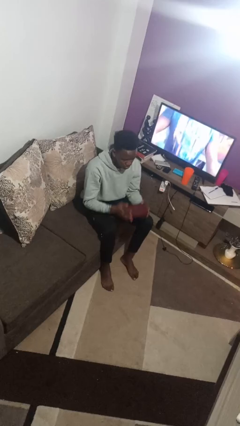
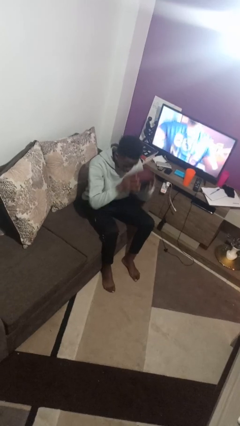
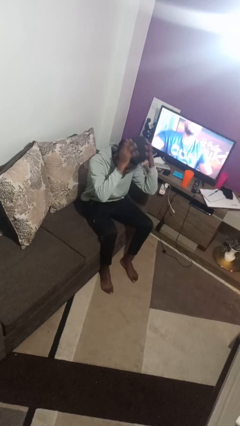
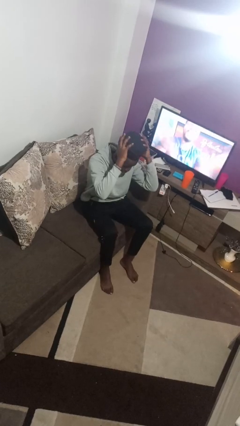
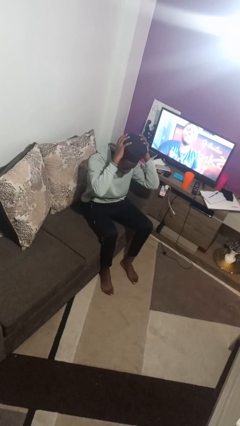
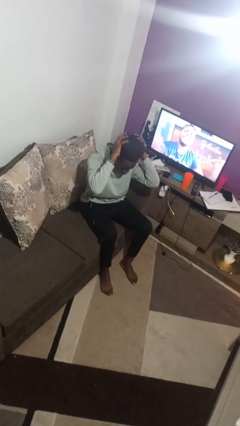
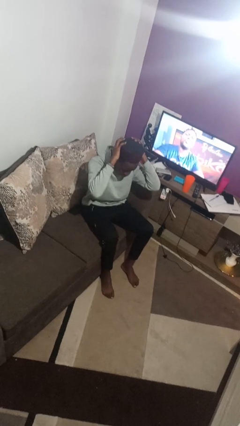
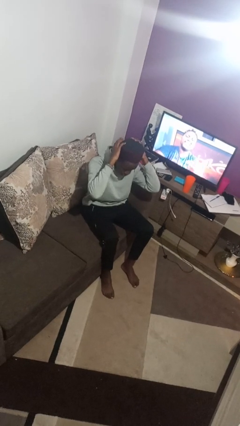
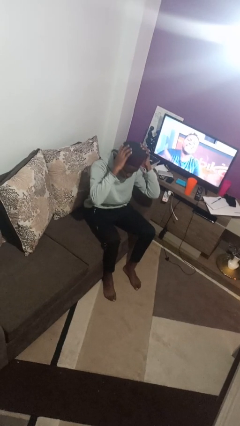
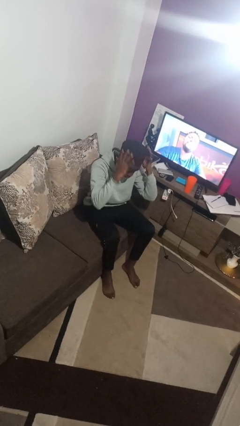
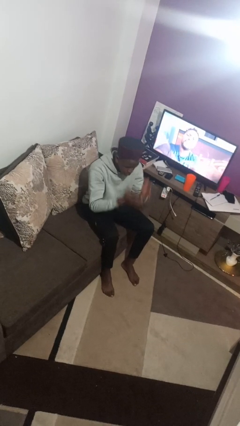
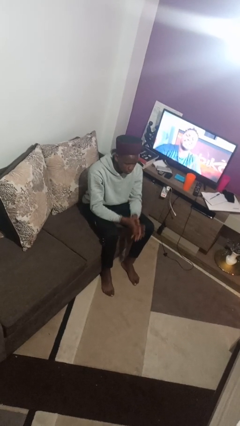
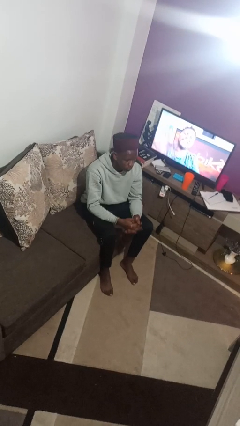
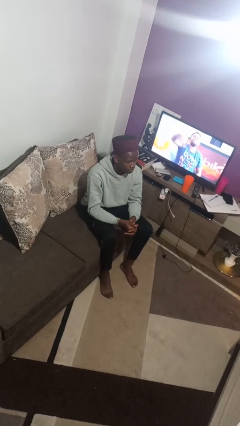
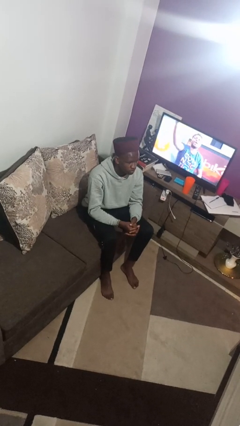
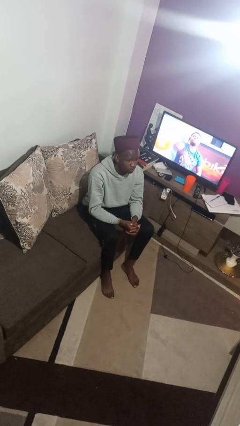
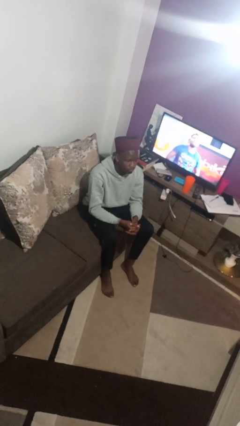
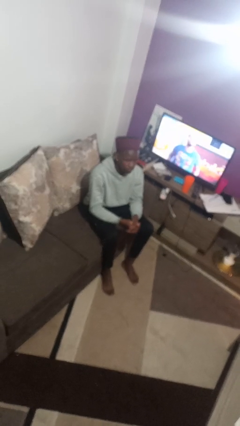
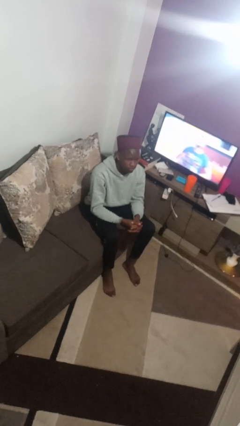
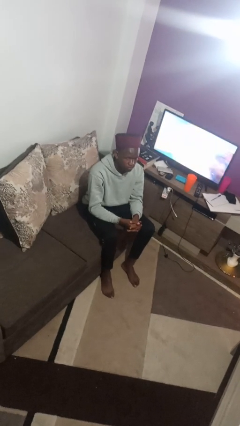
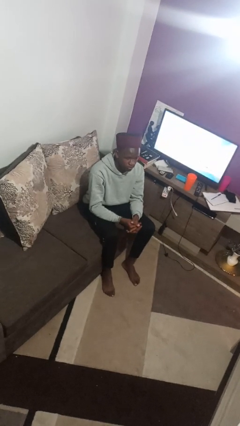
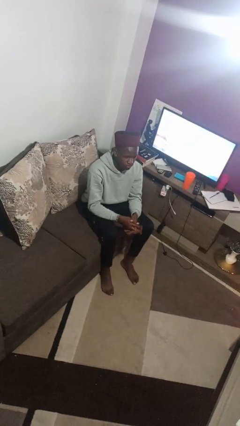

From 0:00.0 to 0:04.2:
person puts on hat

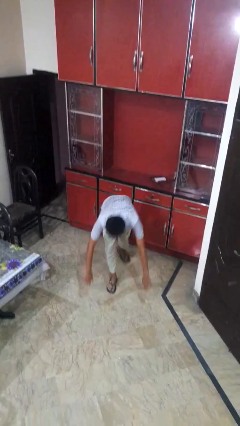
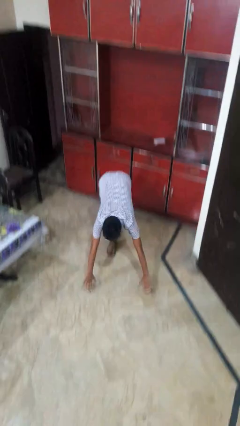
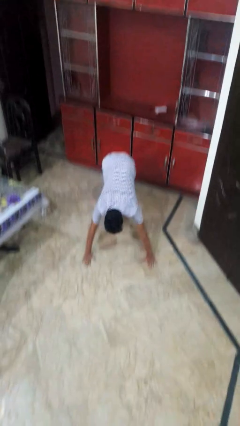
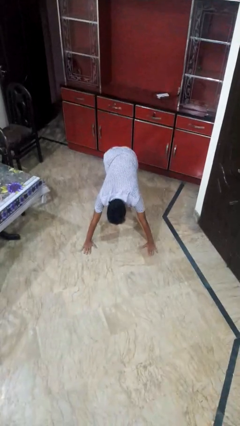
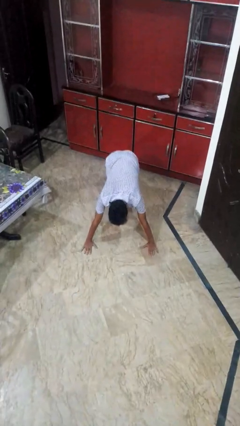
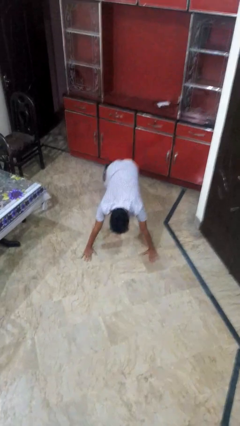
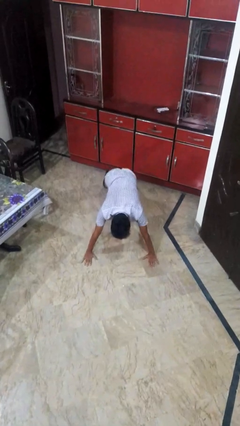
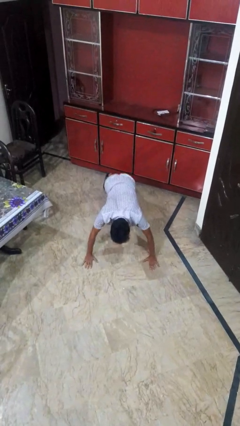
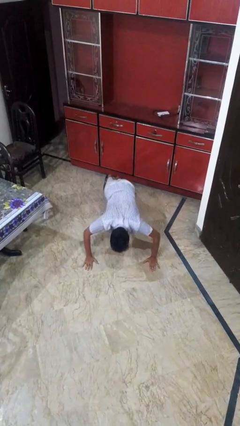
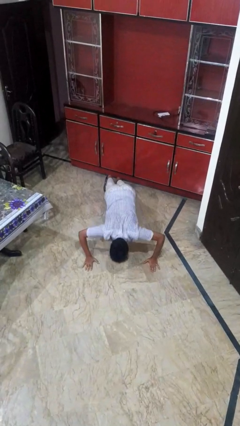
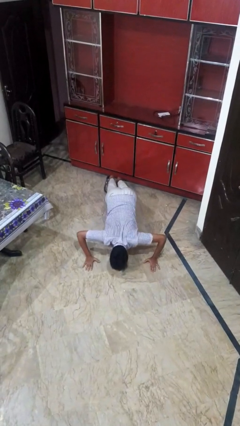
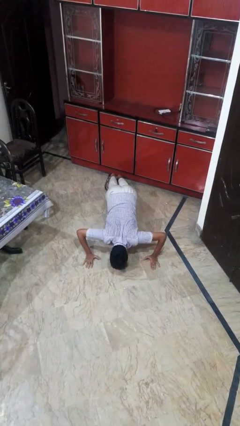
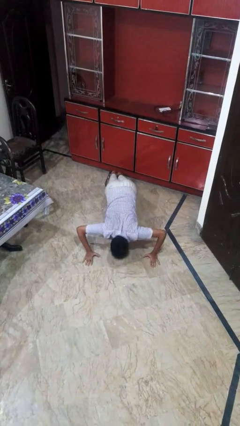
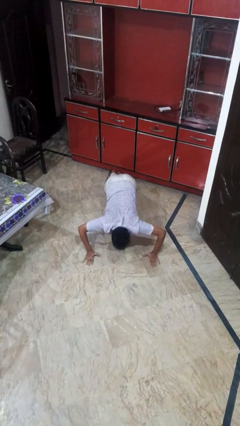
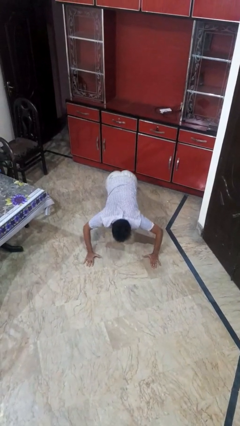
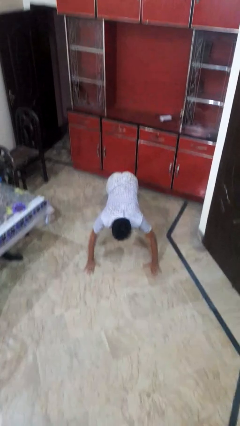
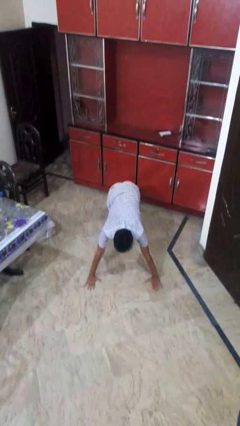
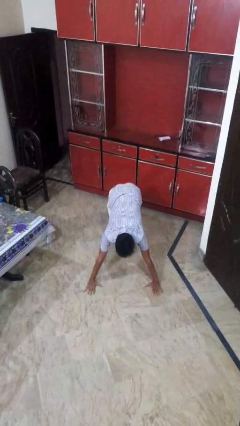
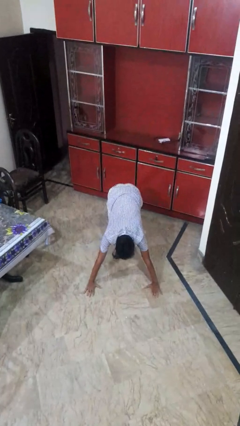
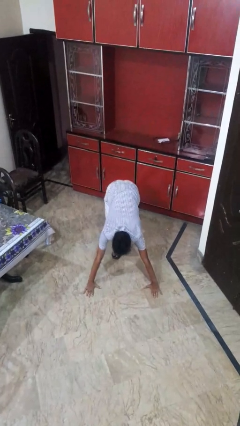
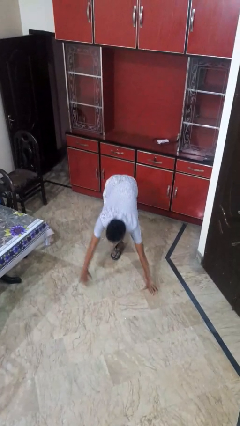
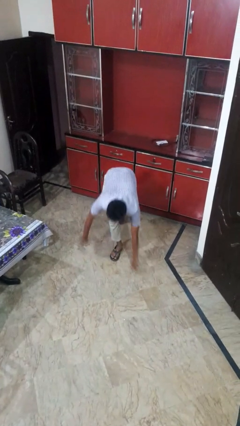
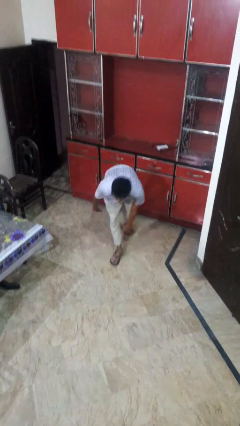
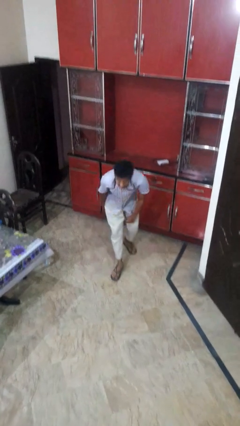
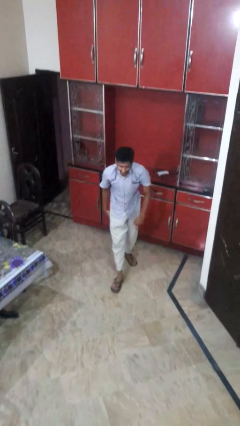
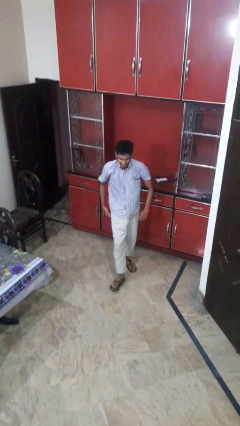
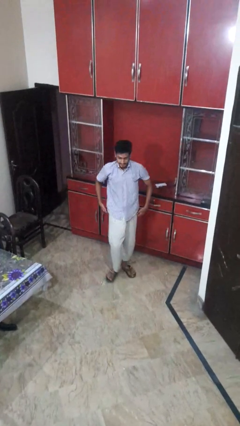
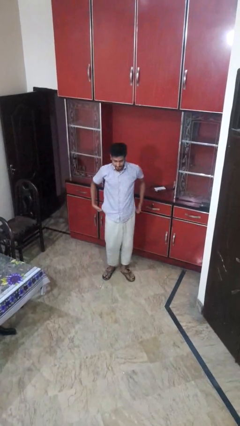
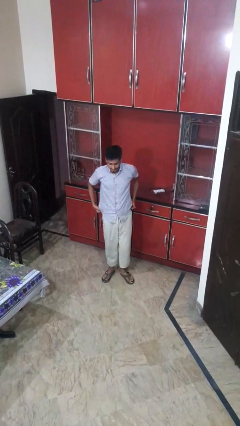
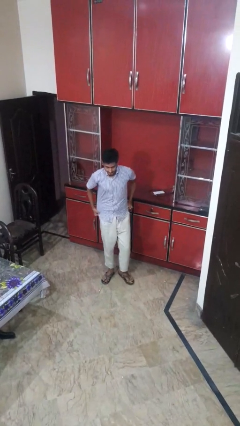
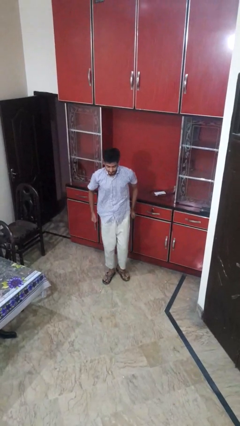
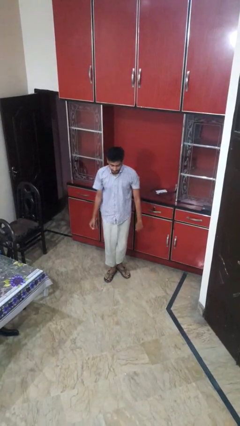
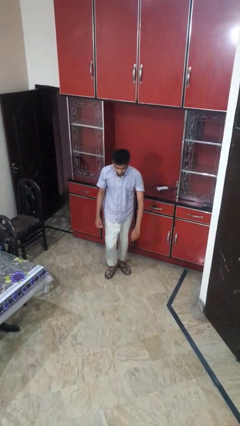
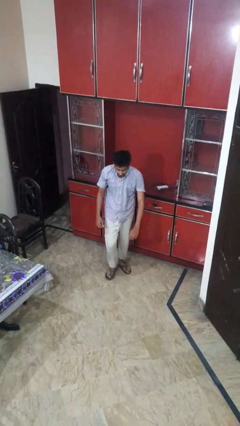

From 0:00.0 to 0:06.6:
person exercises with pushup

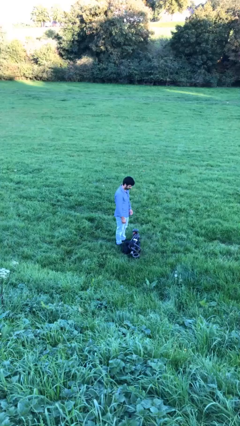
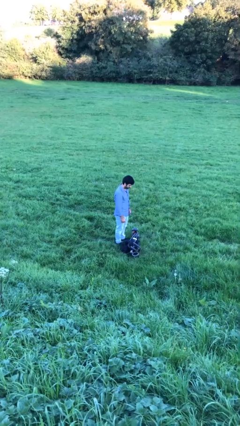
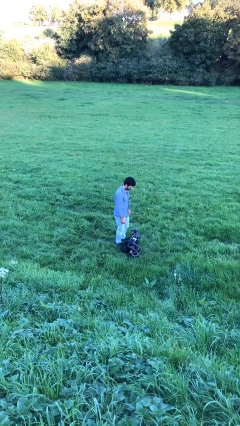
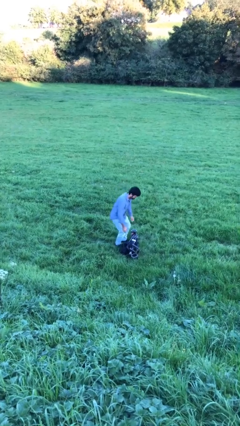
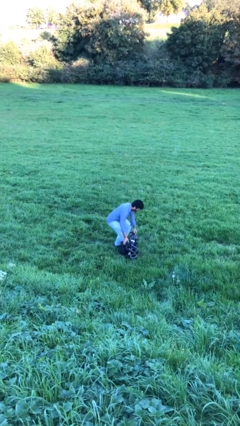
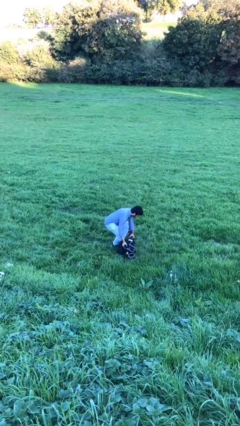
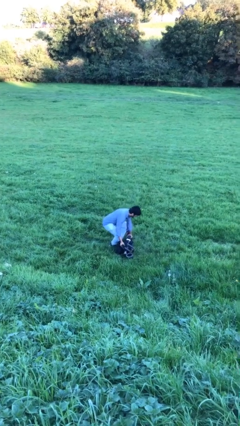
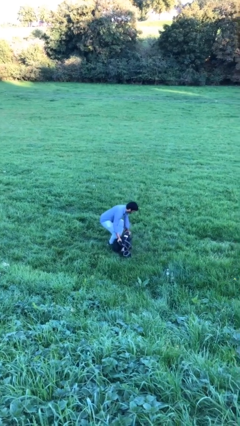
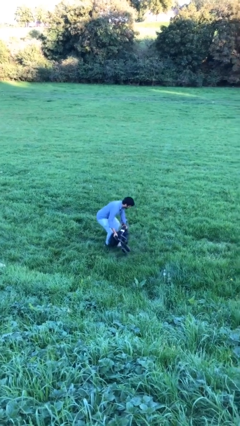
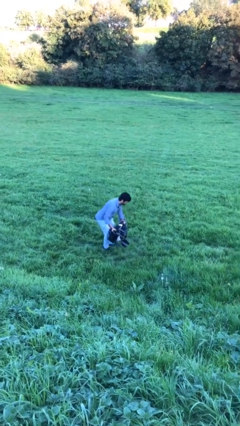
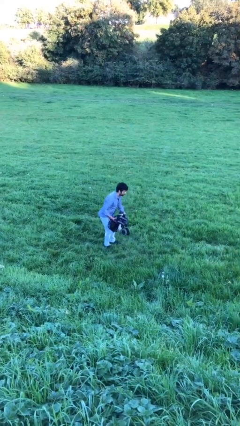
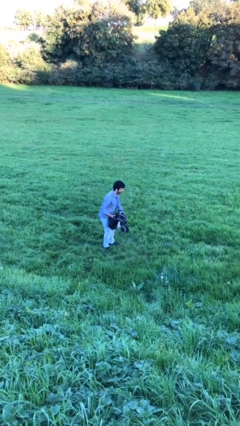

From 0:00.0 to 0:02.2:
person picks up object from floor

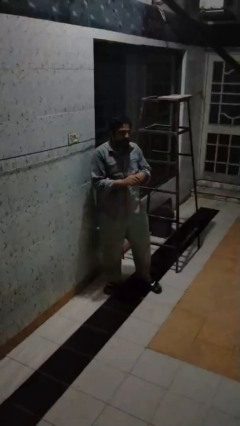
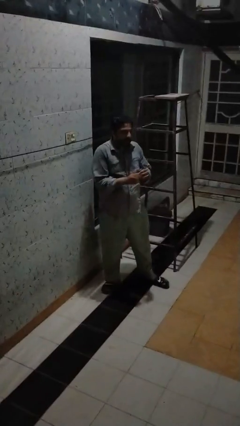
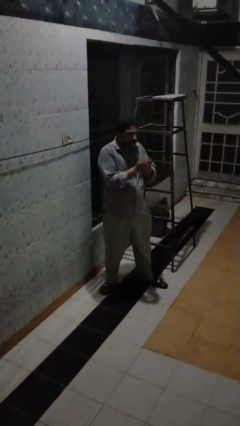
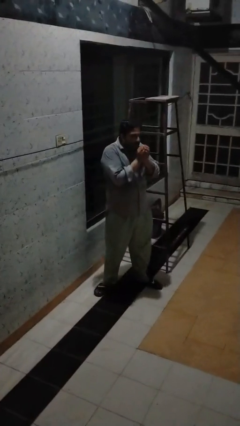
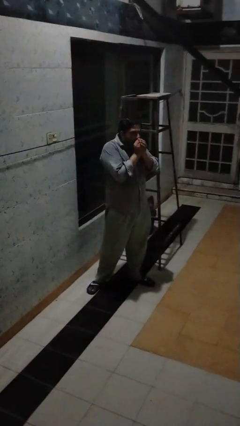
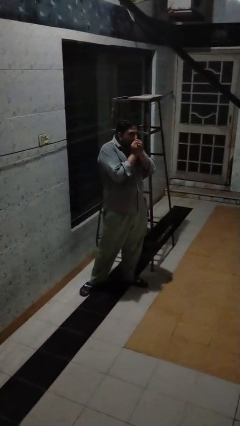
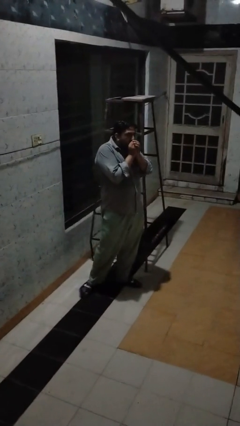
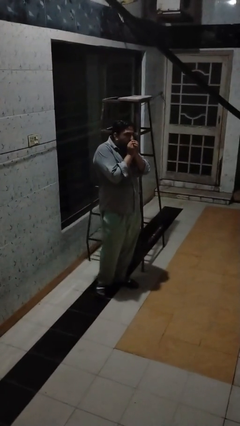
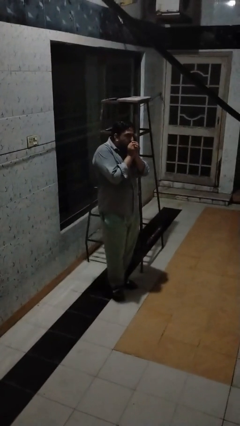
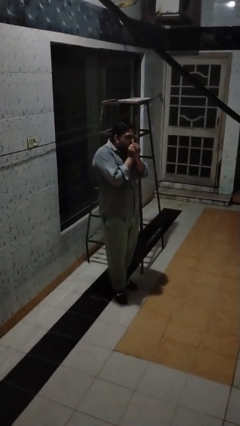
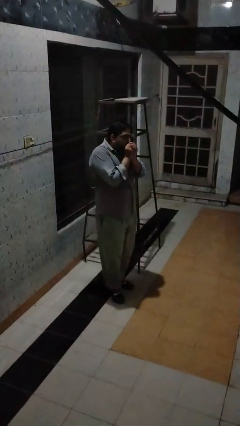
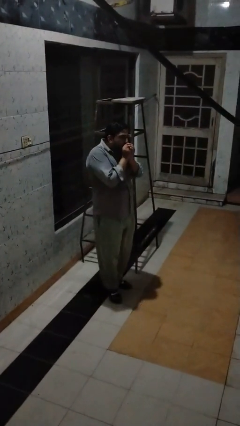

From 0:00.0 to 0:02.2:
person blows into hands

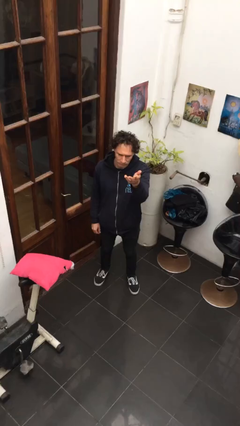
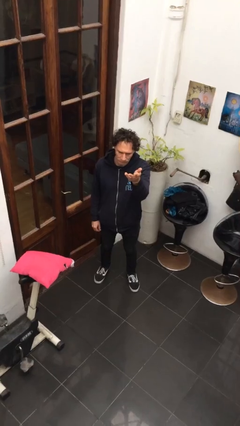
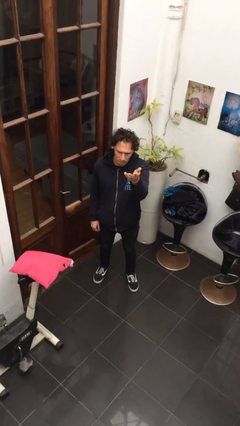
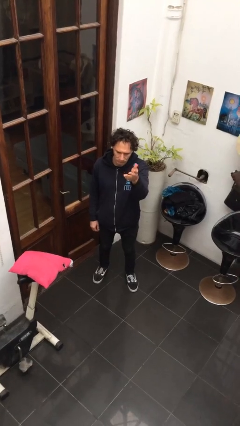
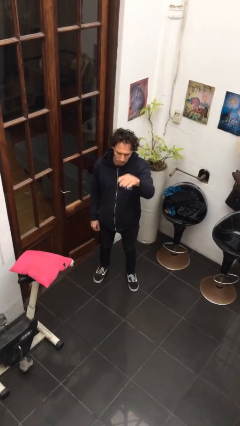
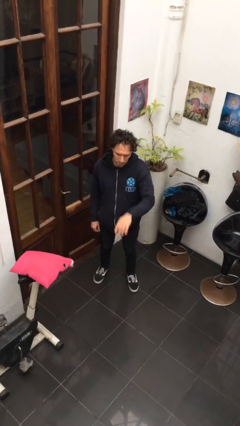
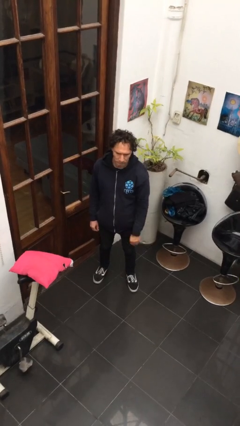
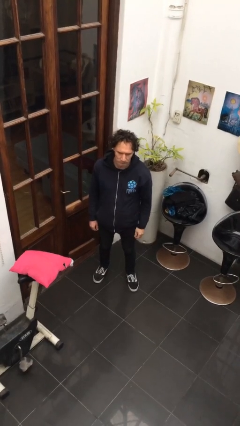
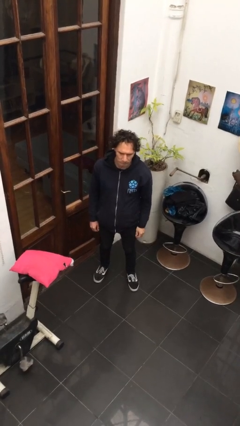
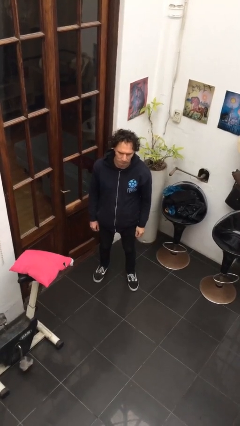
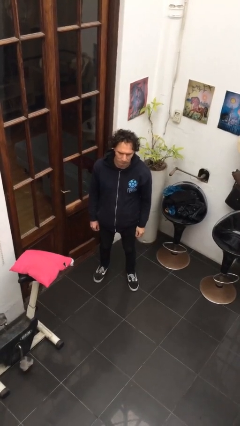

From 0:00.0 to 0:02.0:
person gestures swipe down

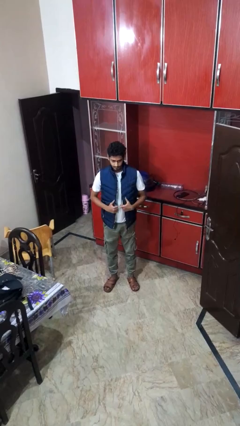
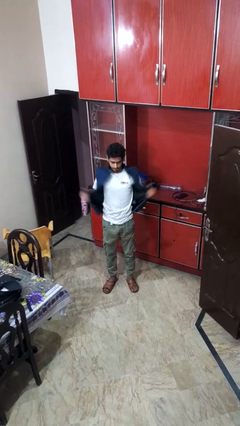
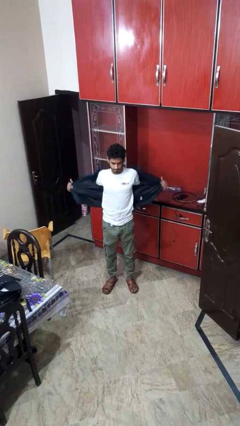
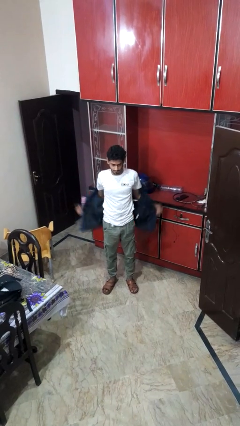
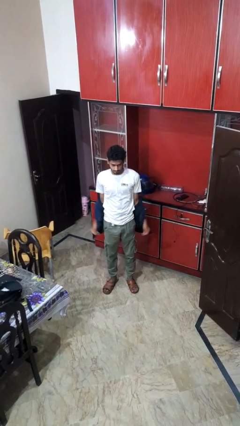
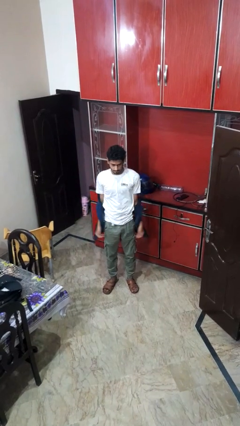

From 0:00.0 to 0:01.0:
person takes off jacket
